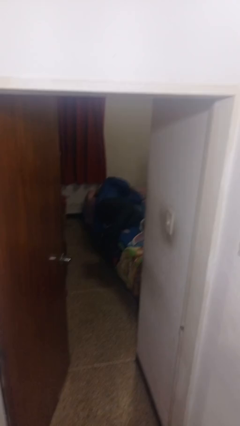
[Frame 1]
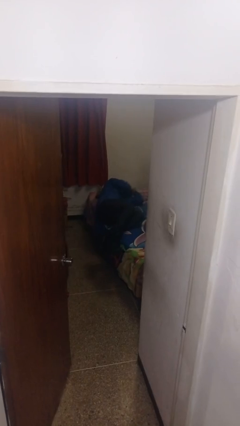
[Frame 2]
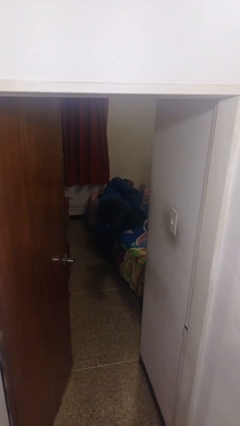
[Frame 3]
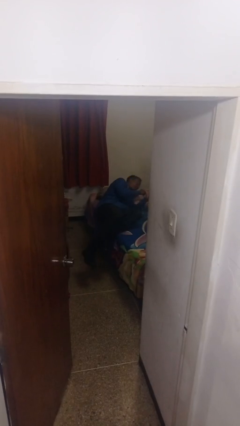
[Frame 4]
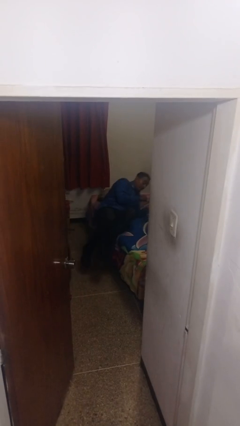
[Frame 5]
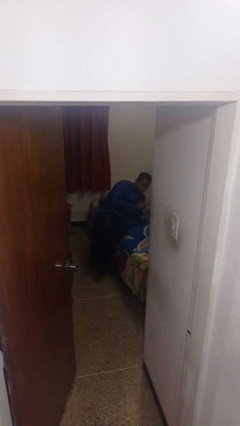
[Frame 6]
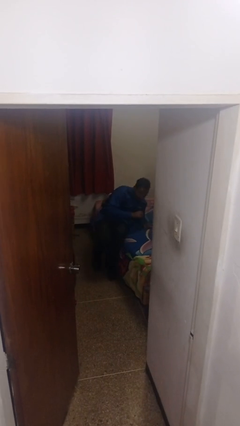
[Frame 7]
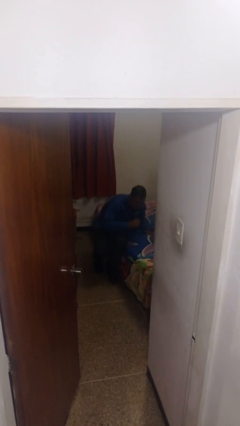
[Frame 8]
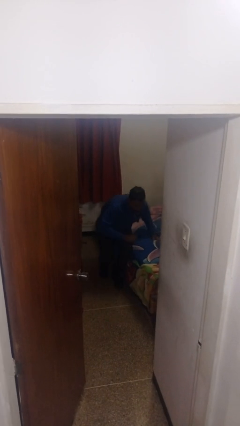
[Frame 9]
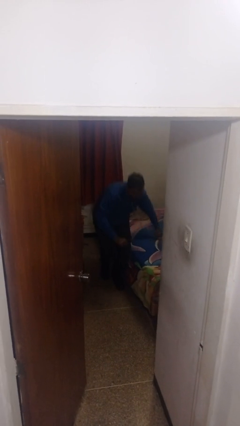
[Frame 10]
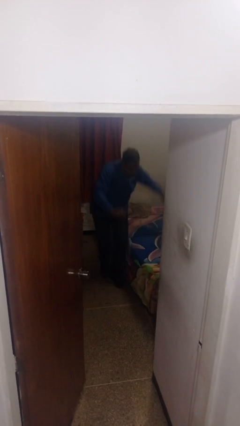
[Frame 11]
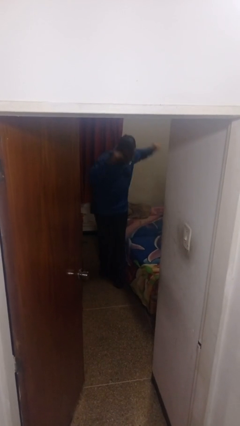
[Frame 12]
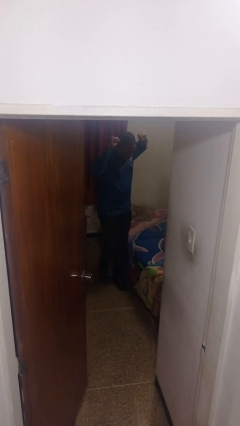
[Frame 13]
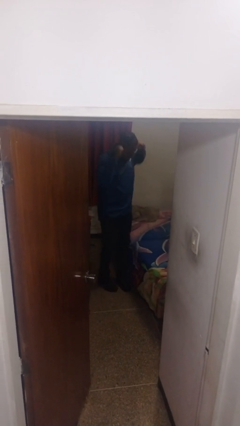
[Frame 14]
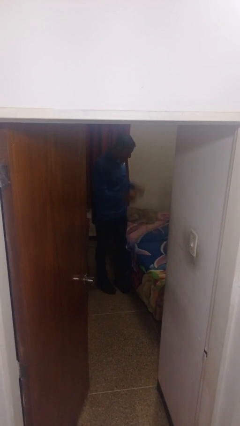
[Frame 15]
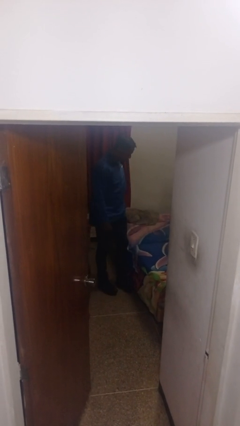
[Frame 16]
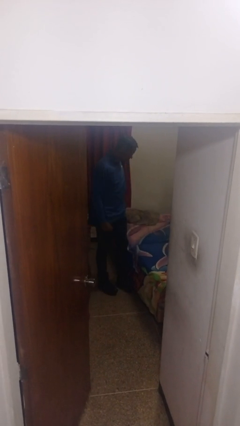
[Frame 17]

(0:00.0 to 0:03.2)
person stands up

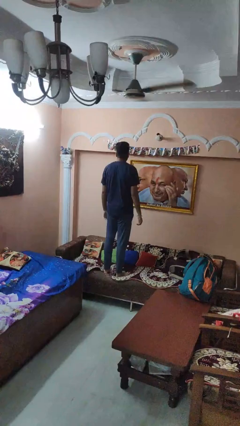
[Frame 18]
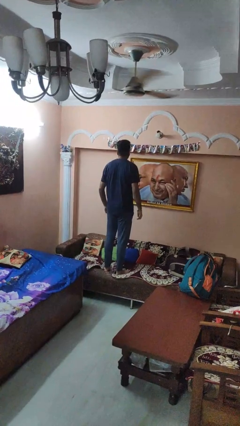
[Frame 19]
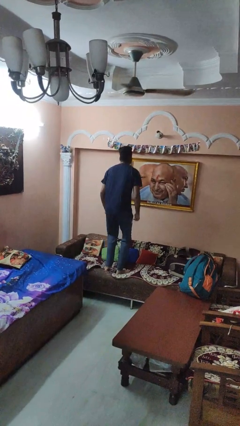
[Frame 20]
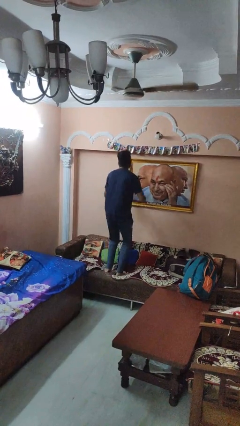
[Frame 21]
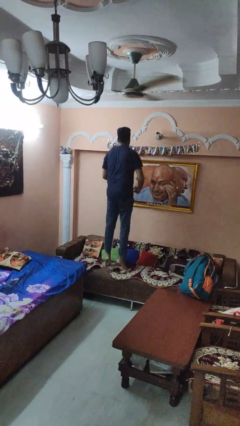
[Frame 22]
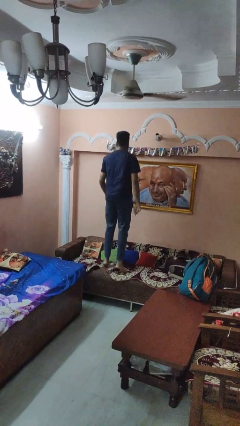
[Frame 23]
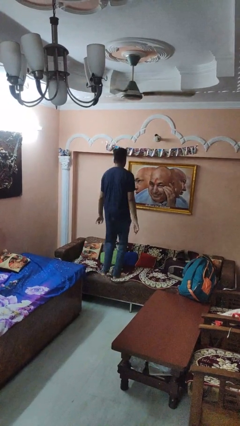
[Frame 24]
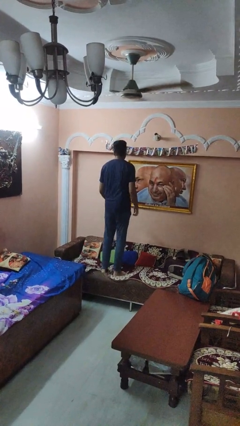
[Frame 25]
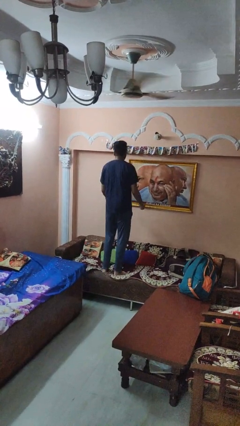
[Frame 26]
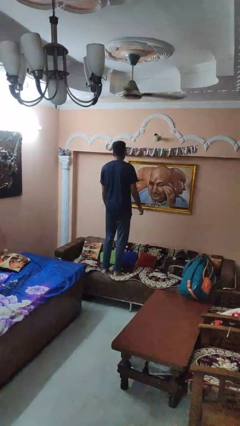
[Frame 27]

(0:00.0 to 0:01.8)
person jumps on couch

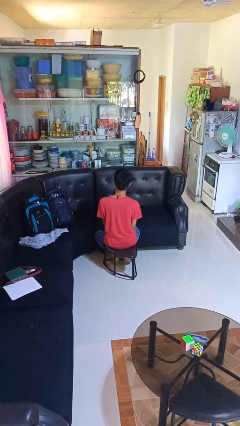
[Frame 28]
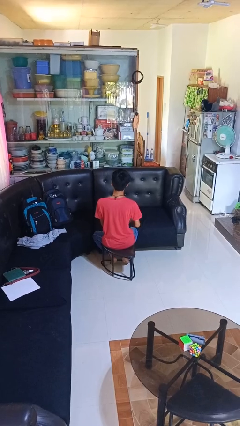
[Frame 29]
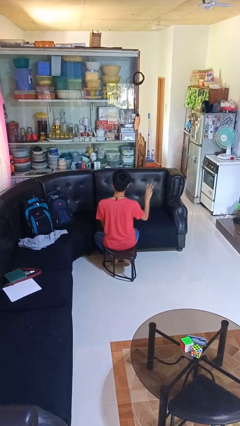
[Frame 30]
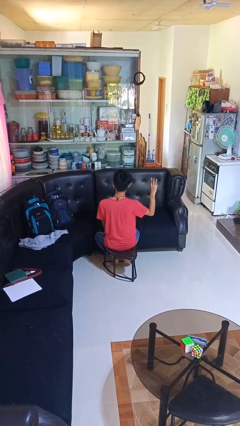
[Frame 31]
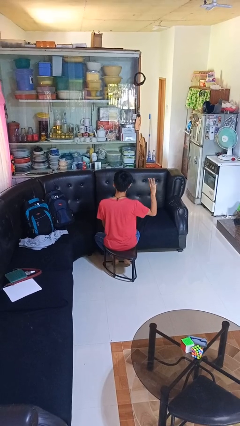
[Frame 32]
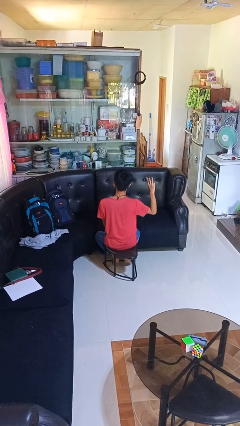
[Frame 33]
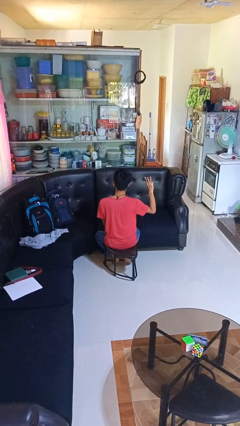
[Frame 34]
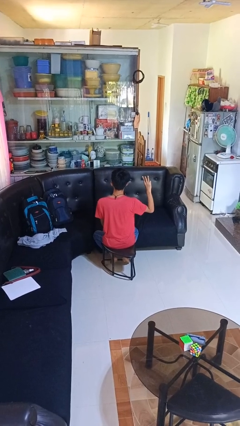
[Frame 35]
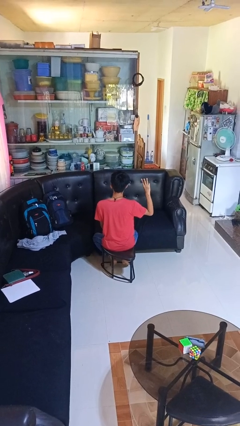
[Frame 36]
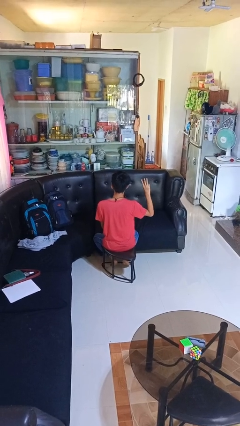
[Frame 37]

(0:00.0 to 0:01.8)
person gestures number three

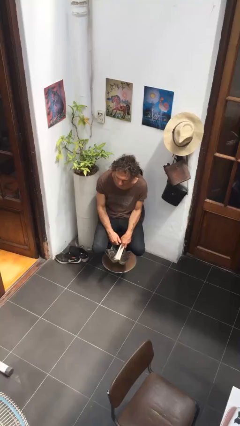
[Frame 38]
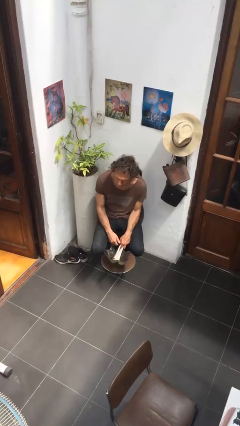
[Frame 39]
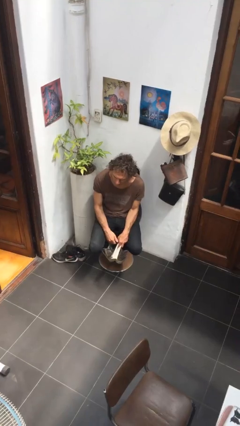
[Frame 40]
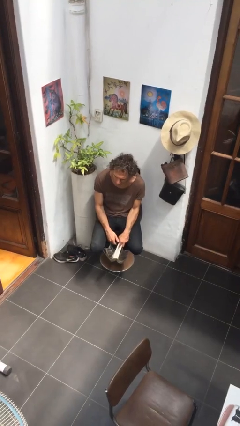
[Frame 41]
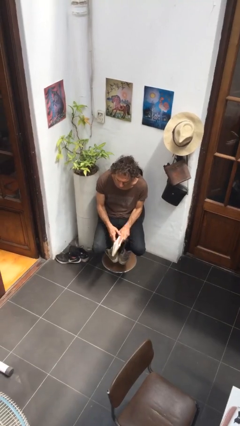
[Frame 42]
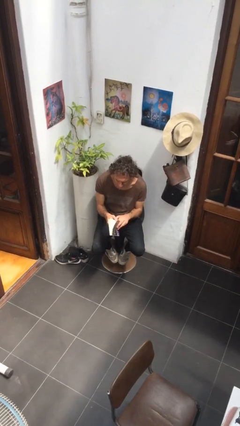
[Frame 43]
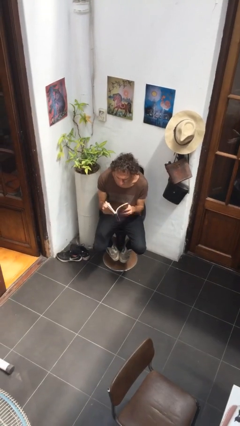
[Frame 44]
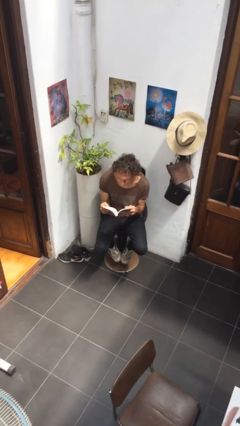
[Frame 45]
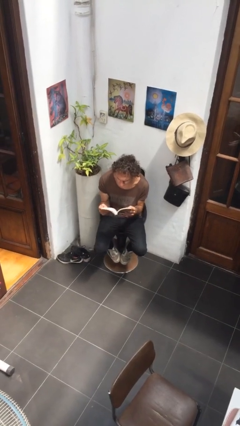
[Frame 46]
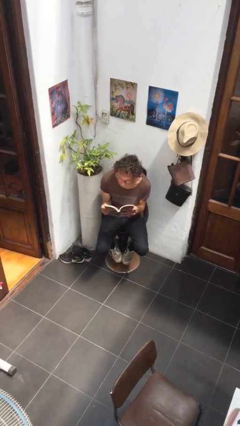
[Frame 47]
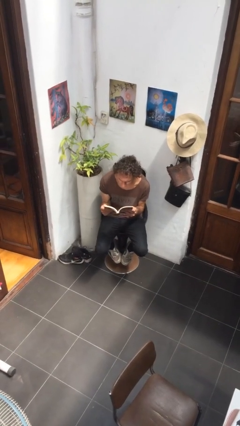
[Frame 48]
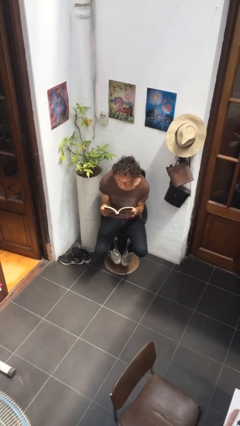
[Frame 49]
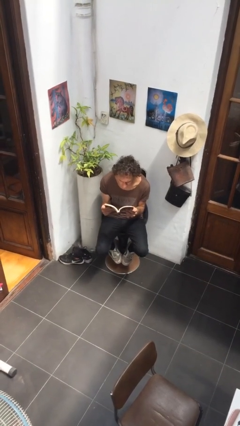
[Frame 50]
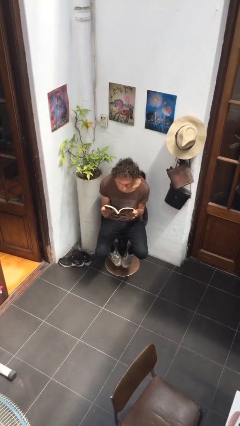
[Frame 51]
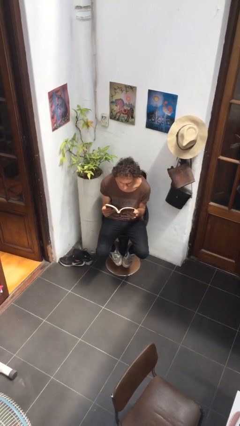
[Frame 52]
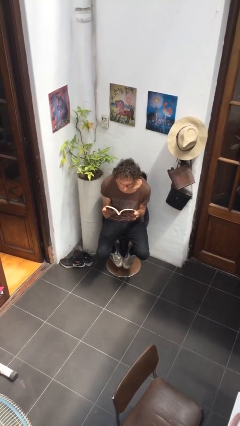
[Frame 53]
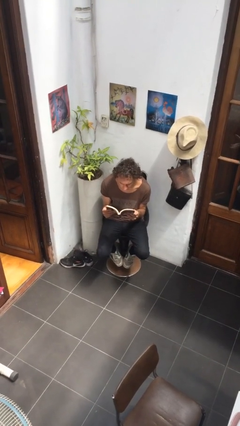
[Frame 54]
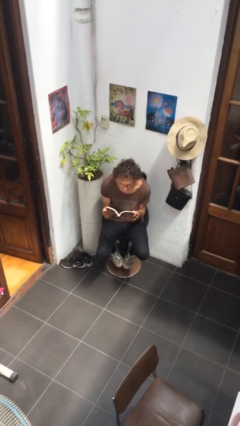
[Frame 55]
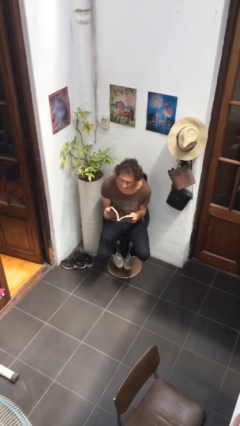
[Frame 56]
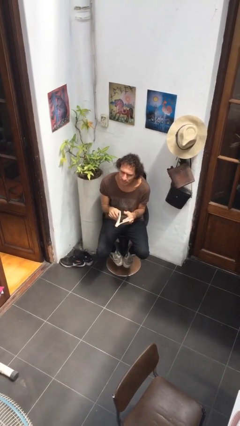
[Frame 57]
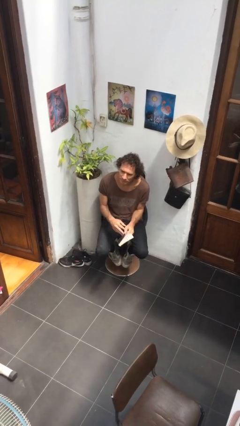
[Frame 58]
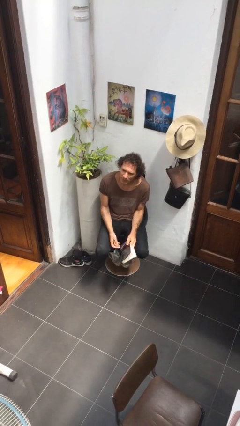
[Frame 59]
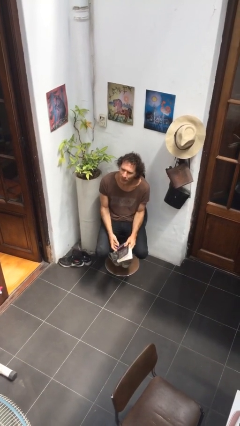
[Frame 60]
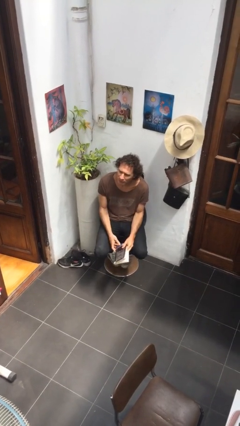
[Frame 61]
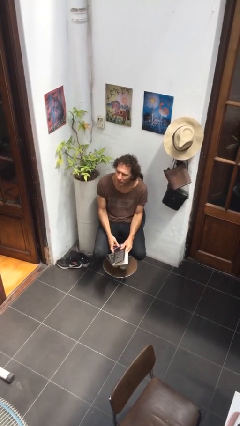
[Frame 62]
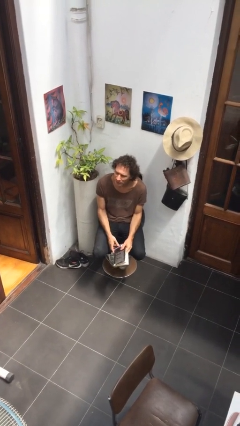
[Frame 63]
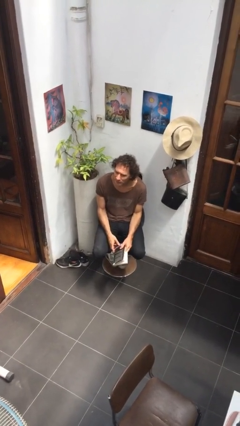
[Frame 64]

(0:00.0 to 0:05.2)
person reads document

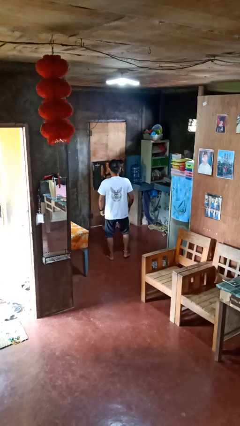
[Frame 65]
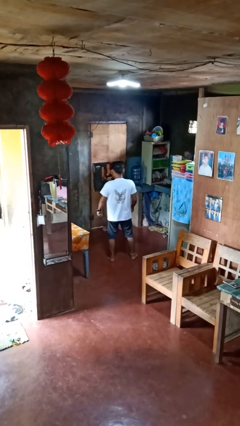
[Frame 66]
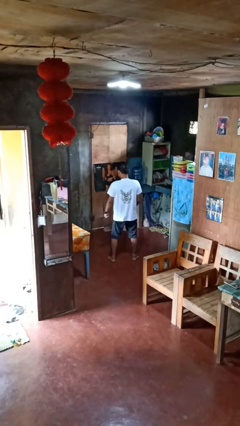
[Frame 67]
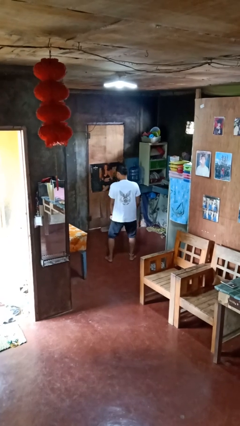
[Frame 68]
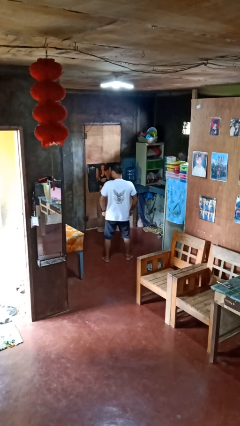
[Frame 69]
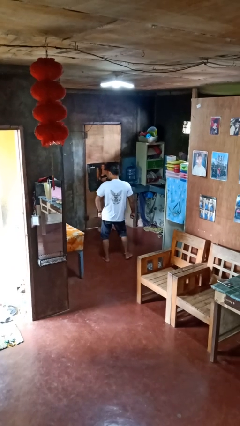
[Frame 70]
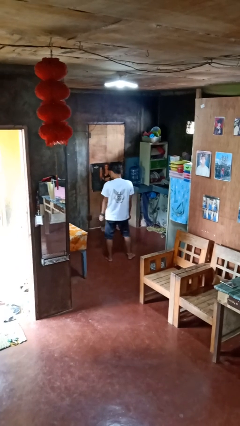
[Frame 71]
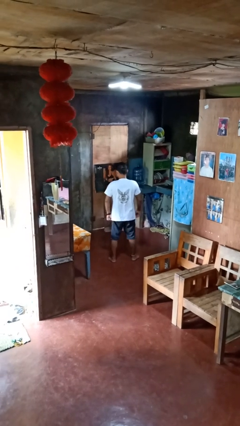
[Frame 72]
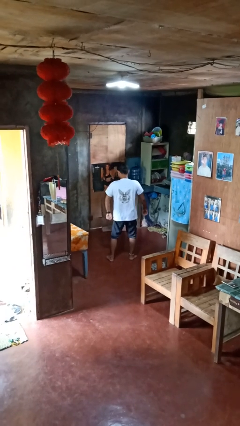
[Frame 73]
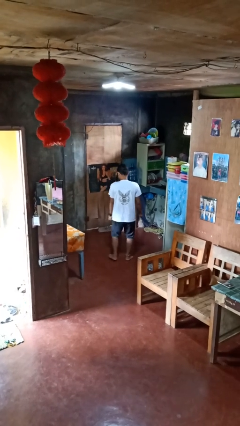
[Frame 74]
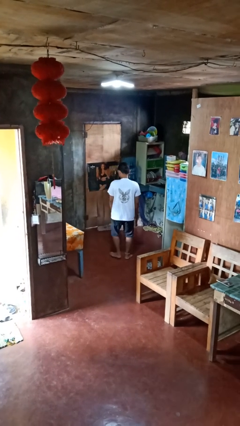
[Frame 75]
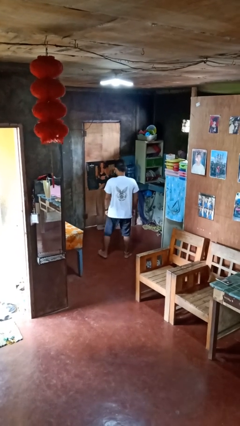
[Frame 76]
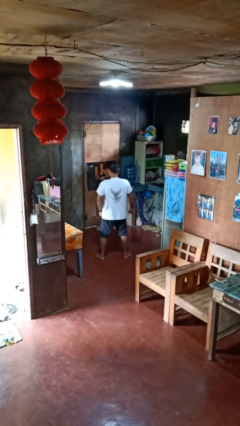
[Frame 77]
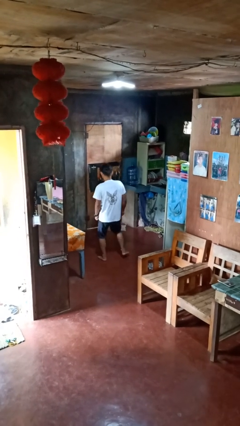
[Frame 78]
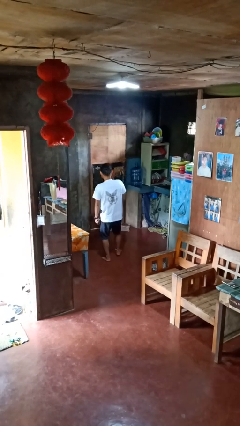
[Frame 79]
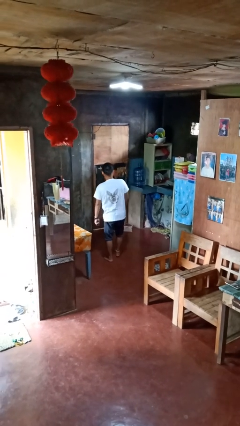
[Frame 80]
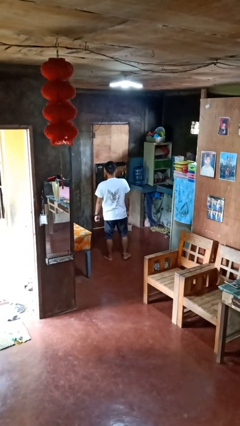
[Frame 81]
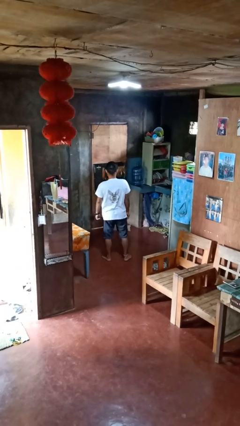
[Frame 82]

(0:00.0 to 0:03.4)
person dances in place

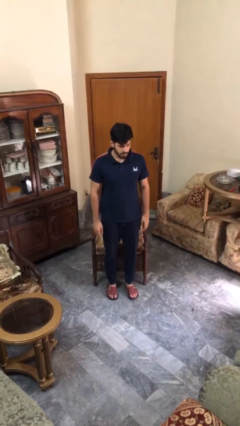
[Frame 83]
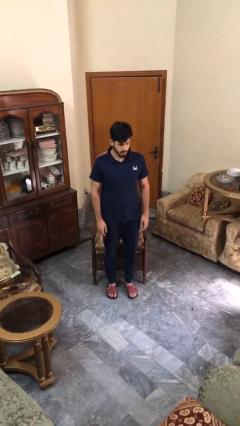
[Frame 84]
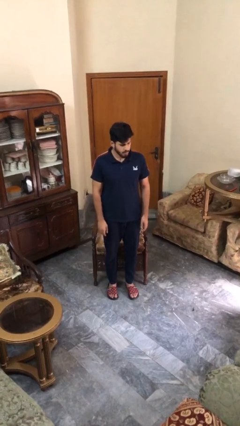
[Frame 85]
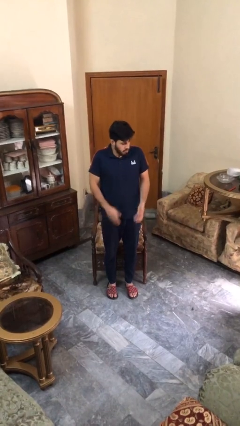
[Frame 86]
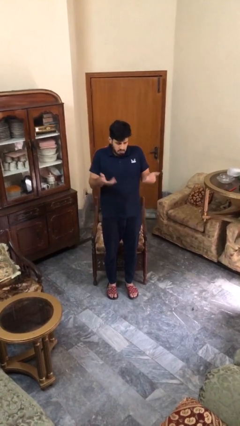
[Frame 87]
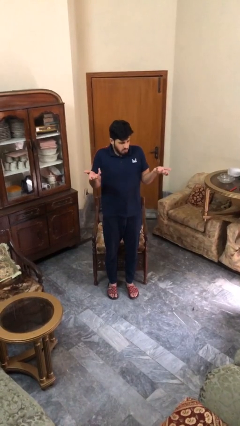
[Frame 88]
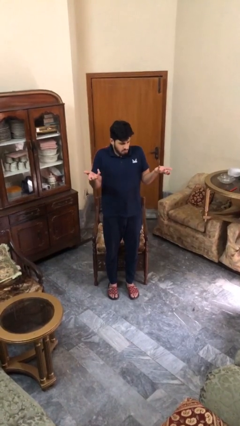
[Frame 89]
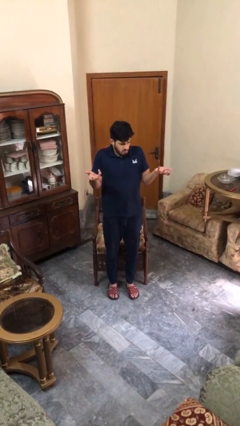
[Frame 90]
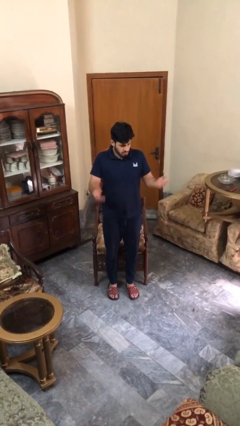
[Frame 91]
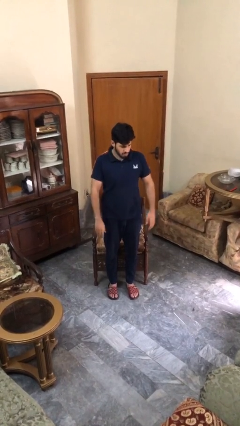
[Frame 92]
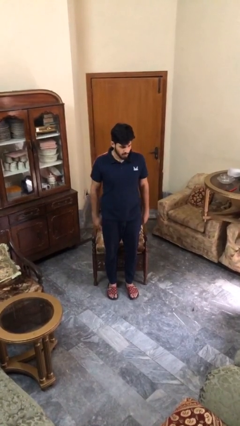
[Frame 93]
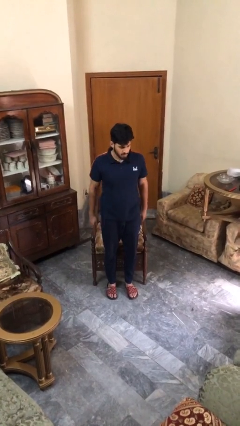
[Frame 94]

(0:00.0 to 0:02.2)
person shrugs
